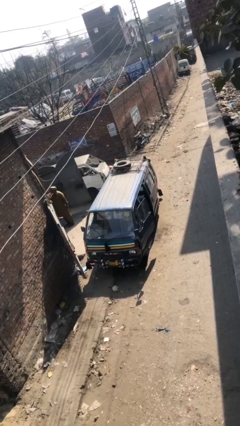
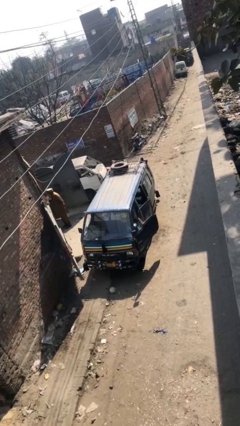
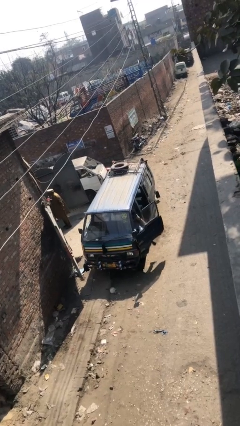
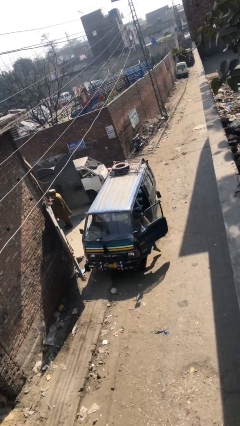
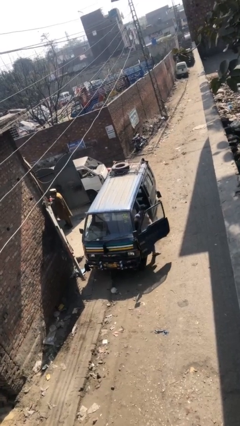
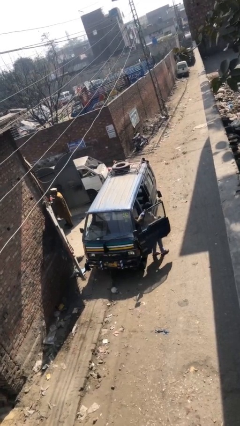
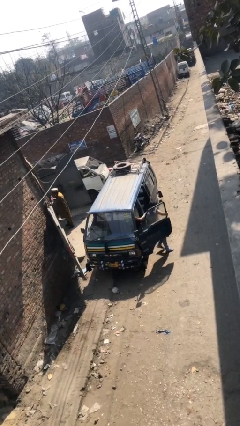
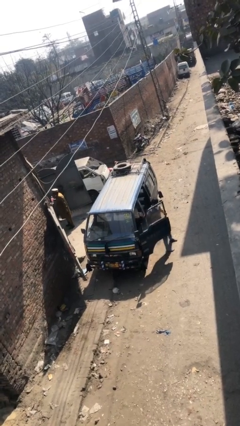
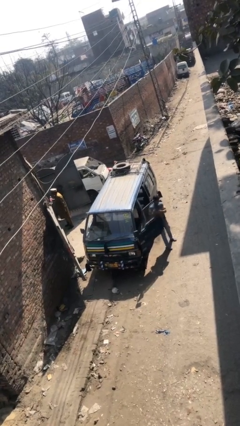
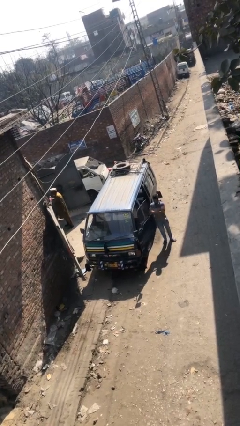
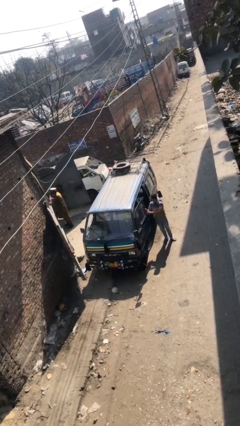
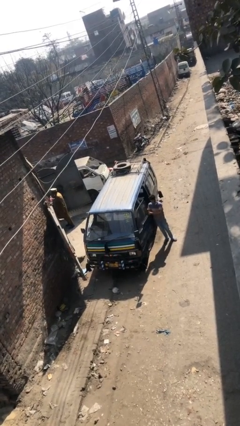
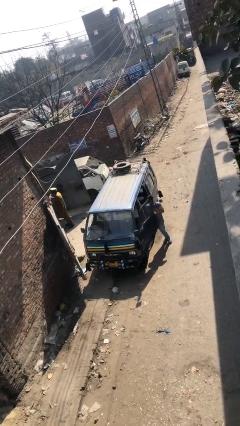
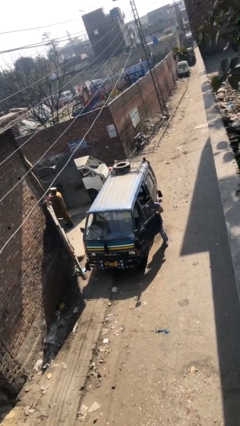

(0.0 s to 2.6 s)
car drops off person

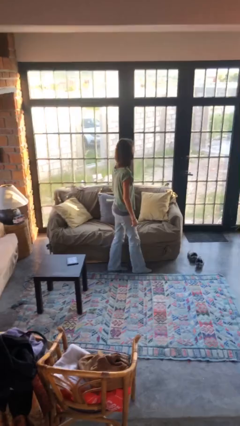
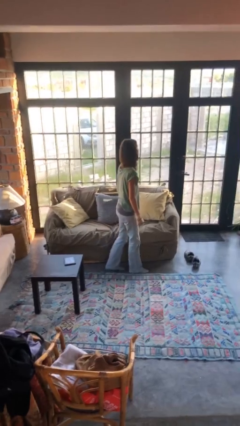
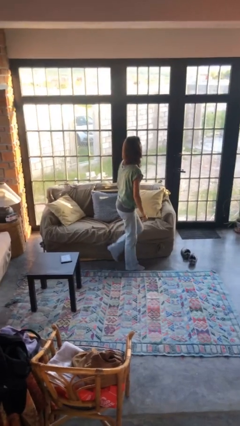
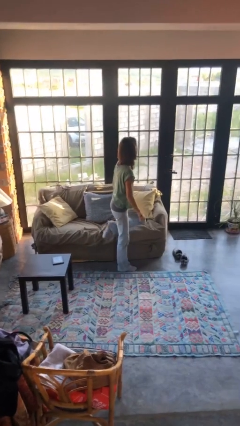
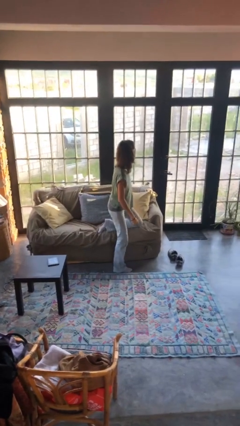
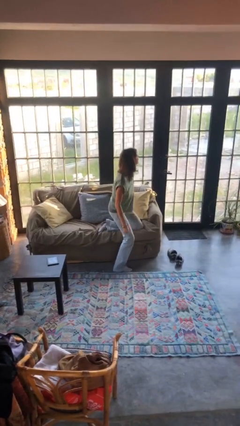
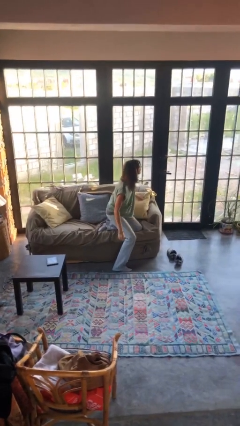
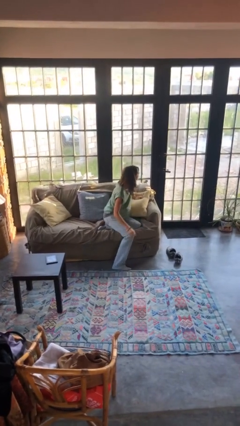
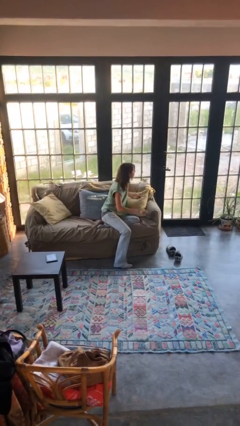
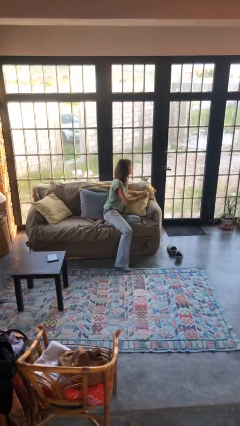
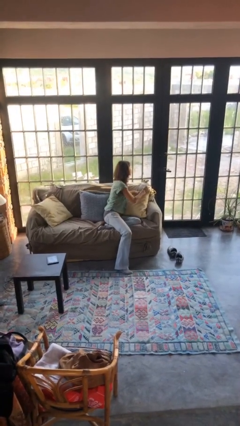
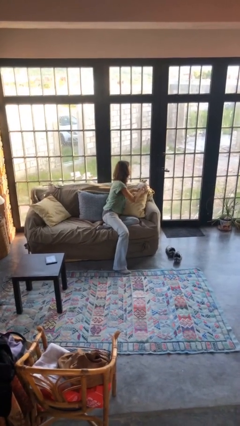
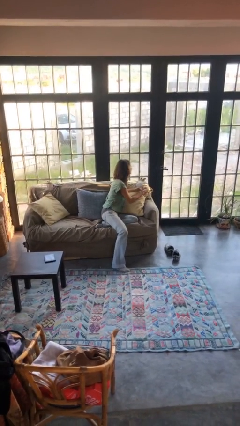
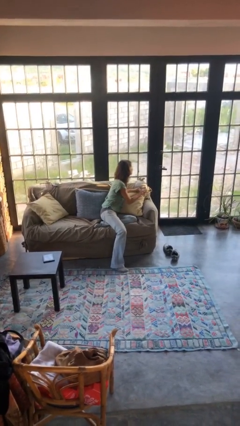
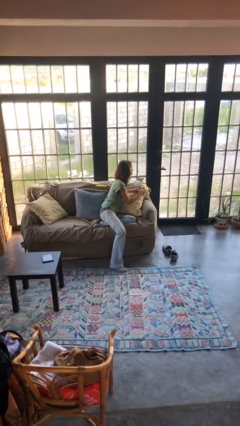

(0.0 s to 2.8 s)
person lies down on couch

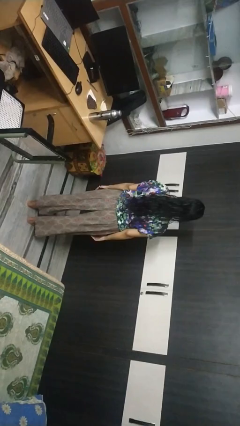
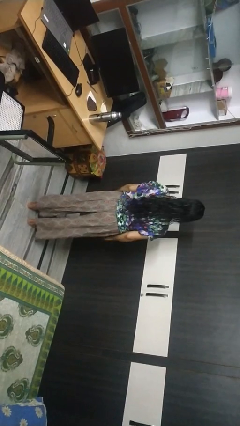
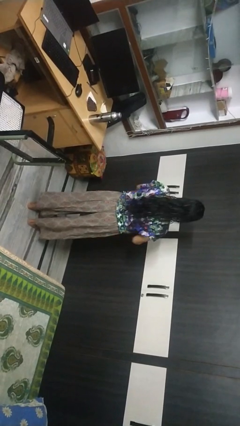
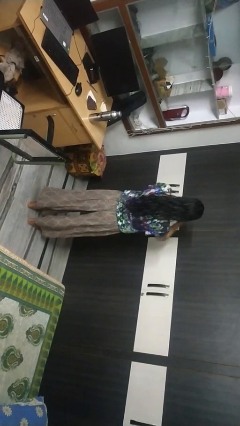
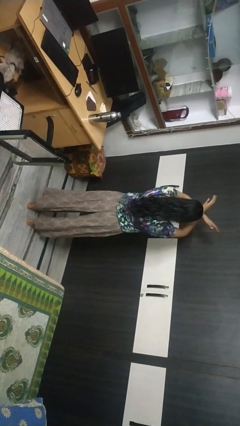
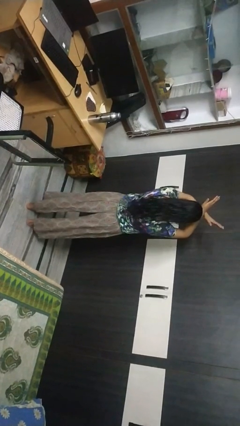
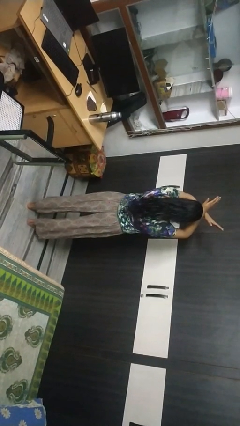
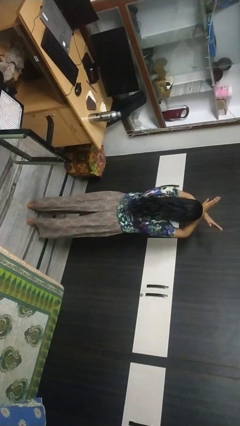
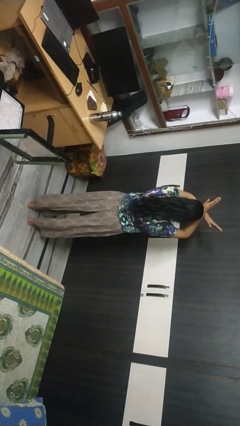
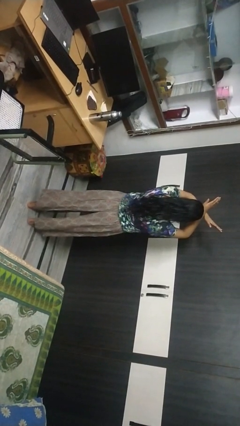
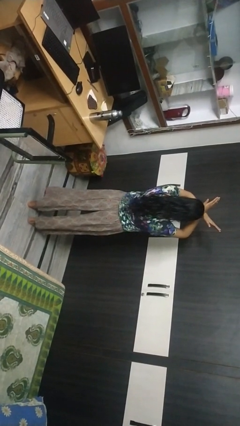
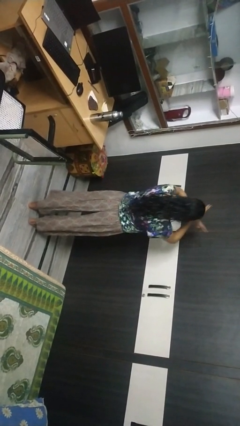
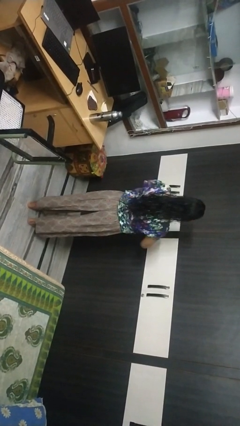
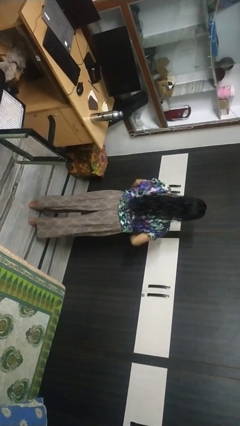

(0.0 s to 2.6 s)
person gestures arms x

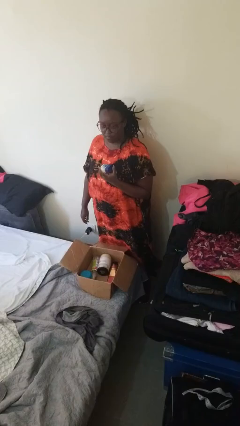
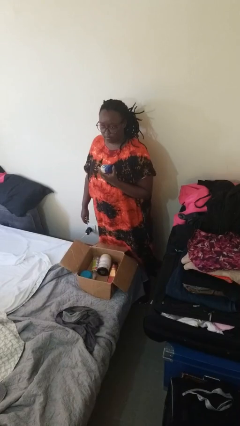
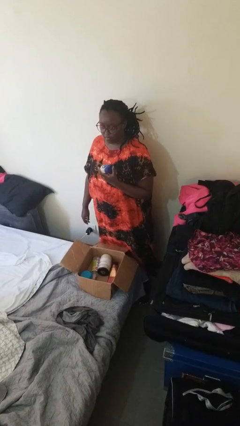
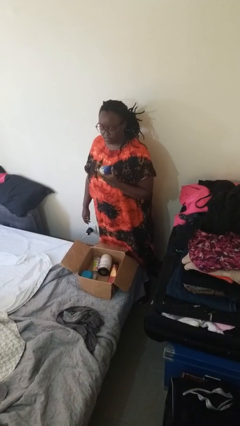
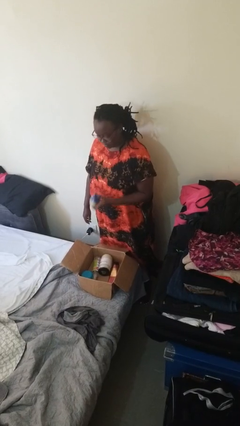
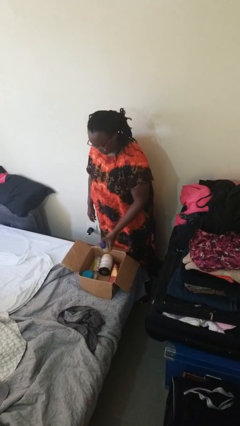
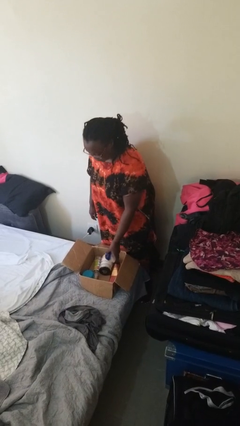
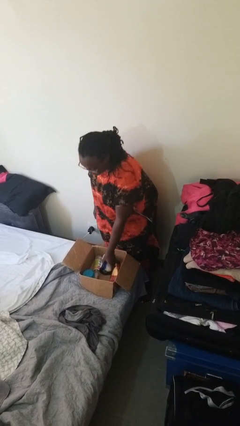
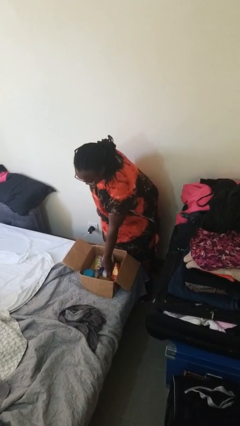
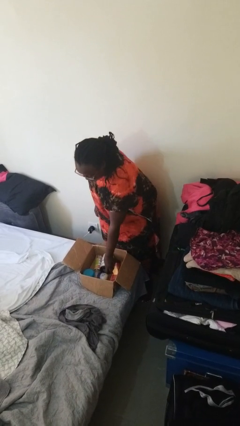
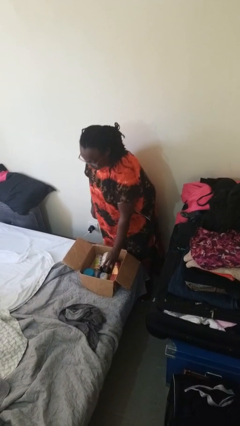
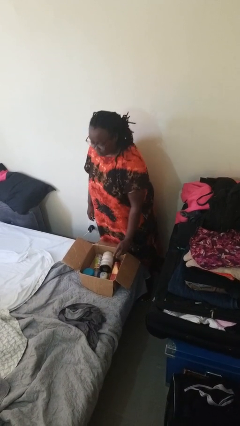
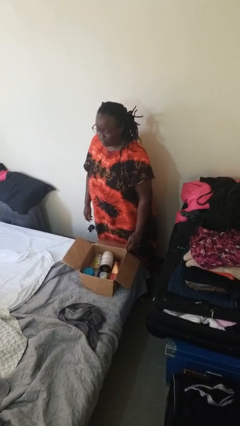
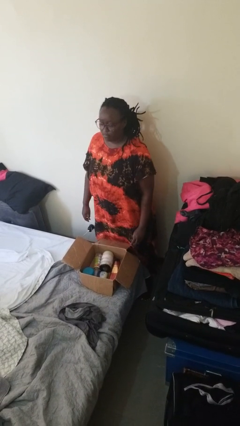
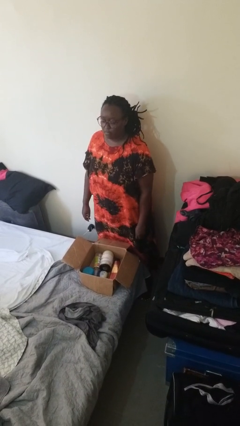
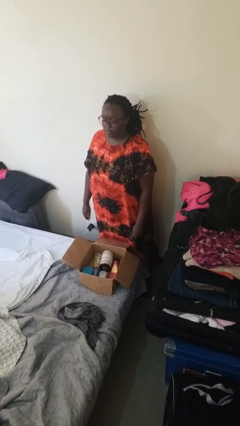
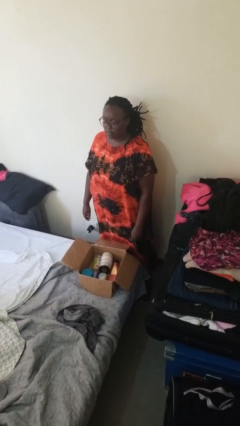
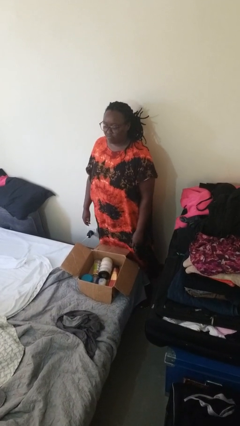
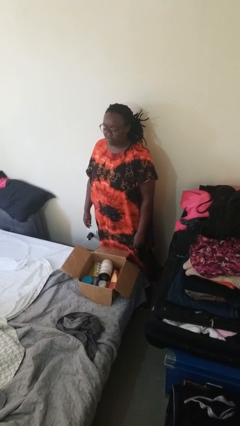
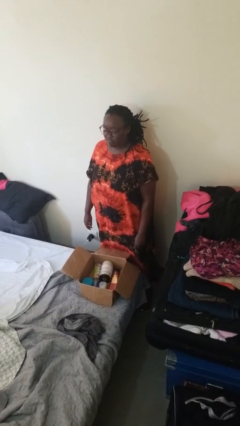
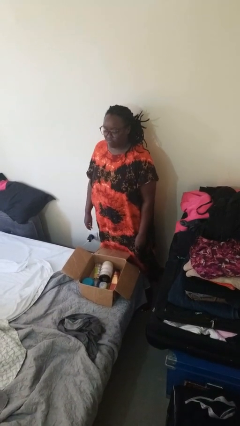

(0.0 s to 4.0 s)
person puts object into box

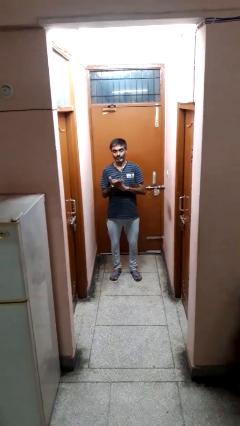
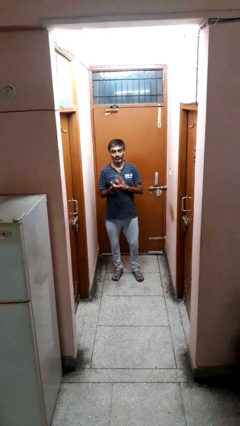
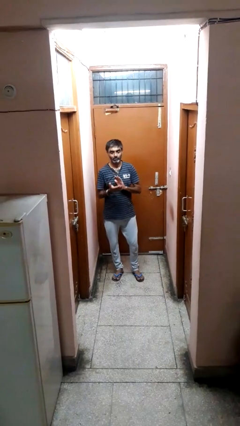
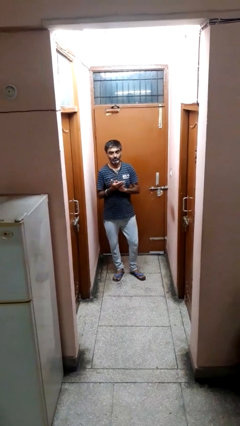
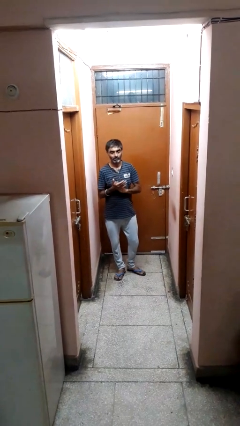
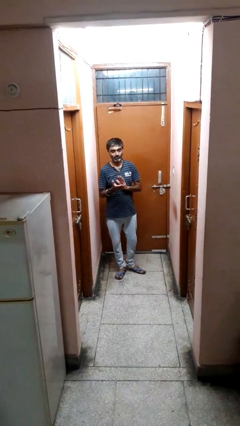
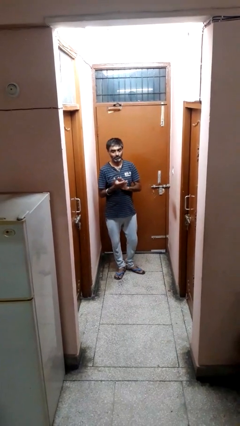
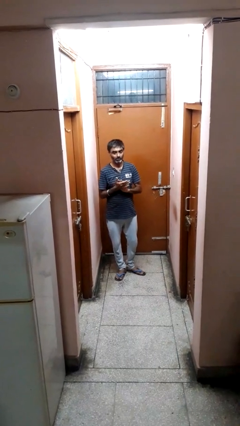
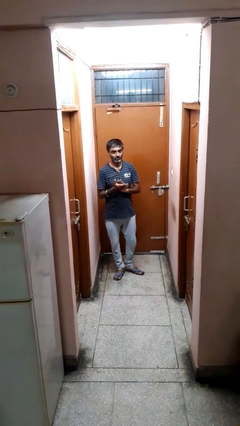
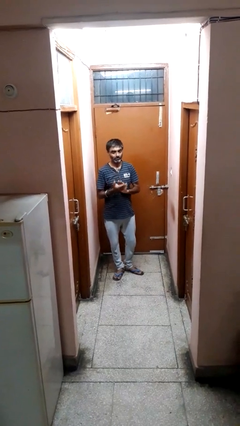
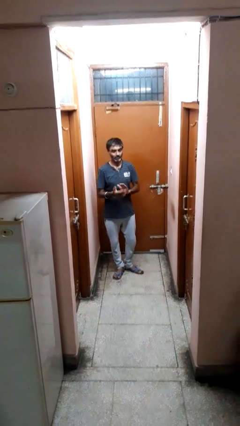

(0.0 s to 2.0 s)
person claps hands

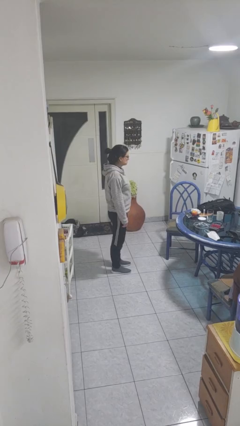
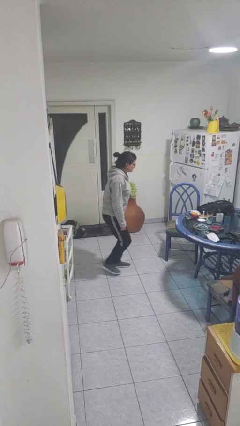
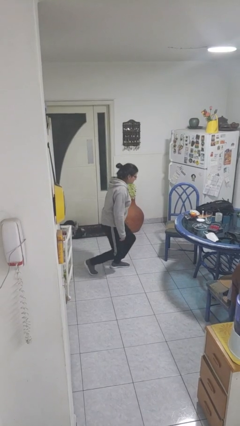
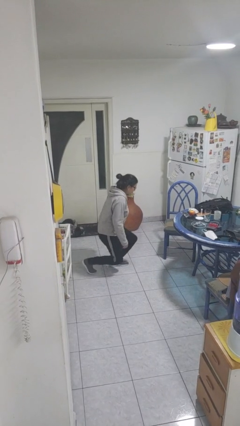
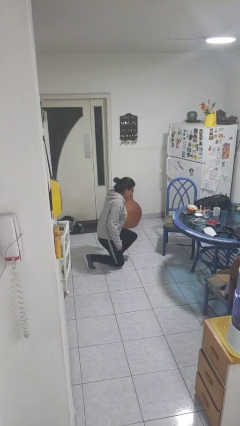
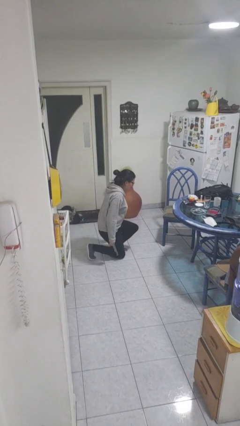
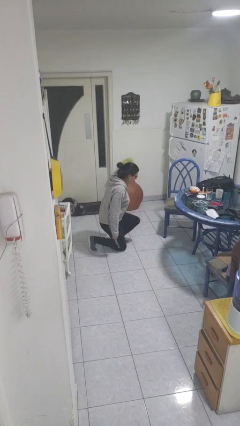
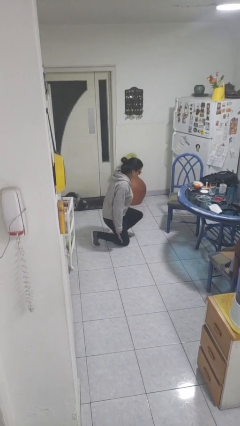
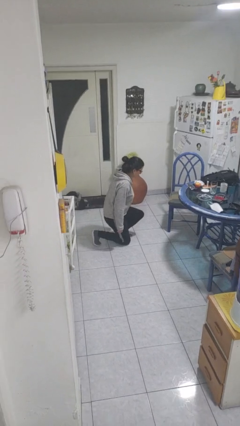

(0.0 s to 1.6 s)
person kneels

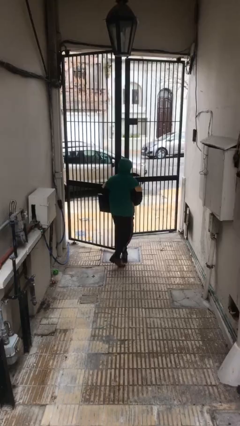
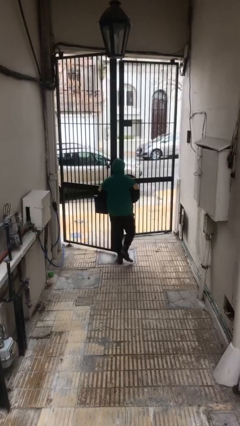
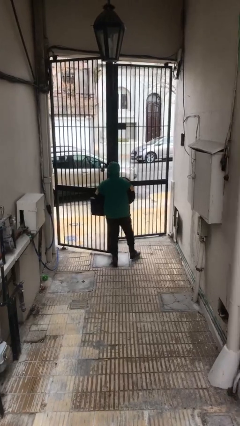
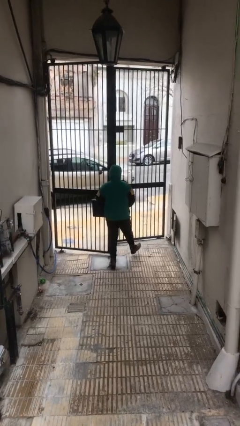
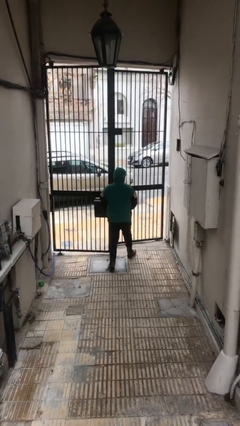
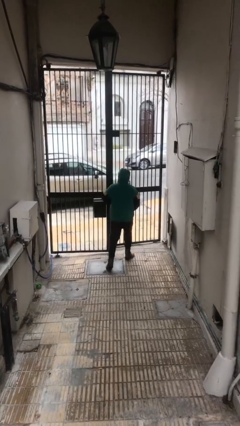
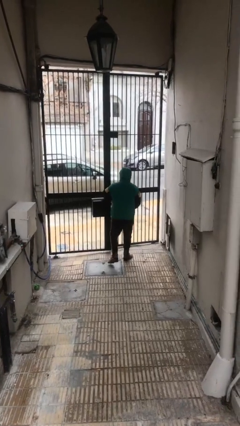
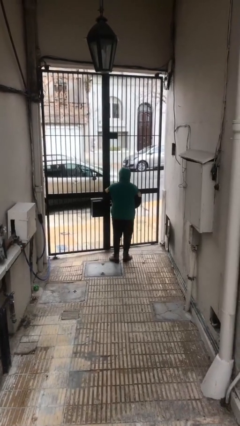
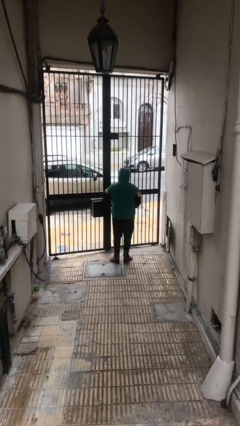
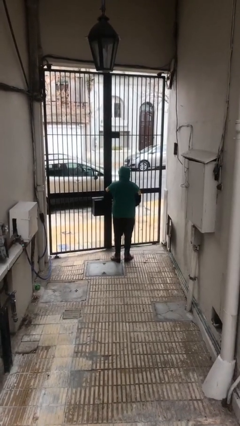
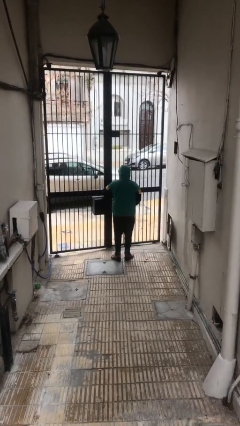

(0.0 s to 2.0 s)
person closes gate
